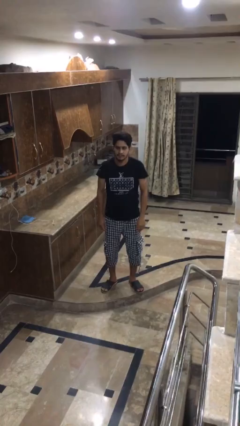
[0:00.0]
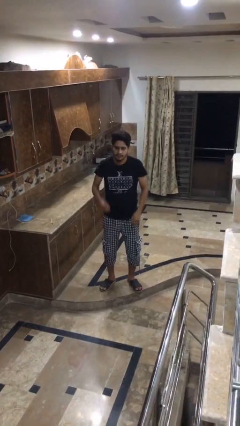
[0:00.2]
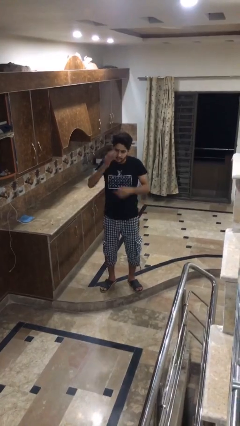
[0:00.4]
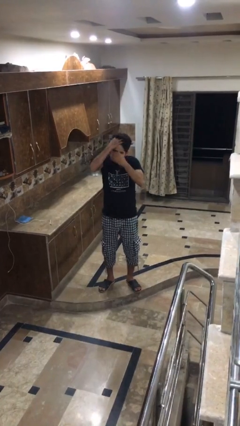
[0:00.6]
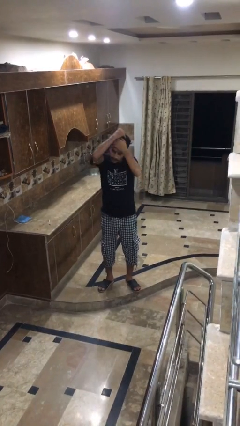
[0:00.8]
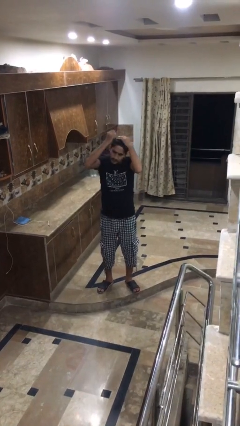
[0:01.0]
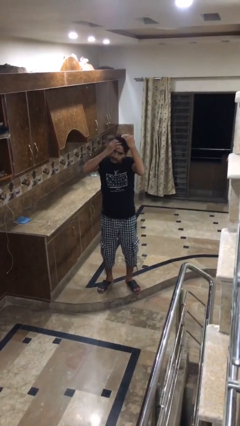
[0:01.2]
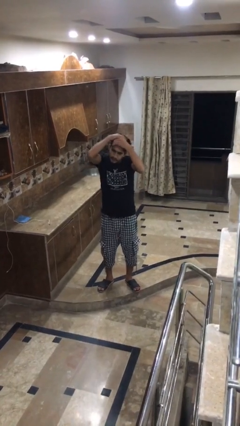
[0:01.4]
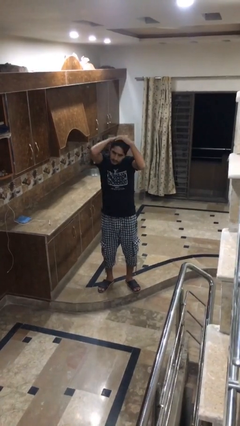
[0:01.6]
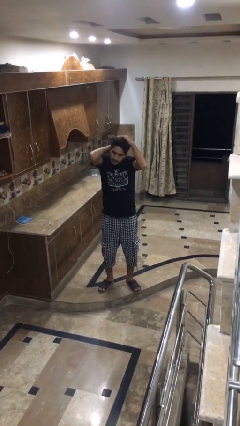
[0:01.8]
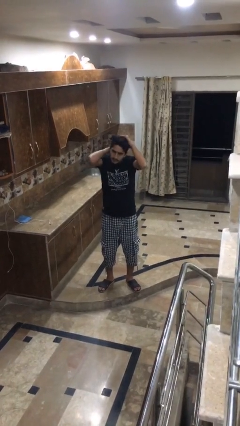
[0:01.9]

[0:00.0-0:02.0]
person strokes hair

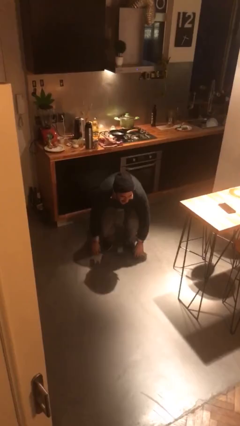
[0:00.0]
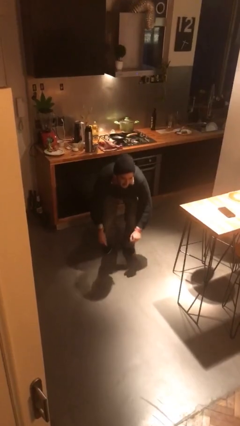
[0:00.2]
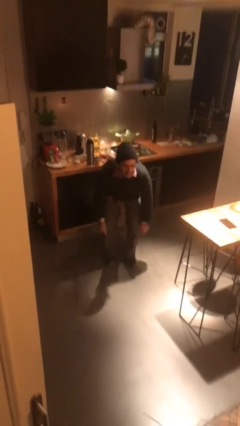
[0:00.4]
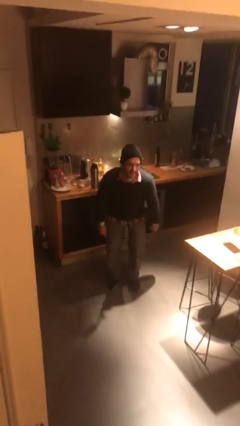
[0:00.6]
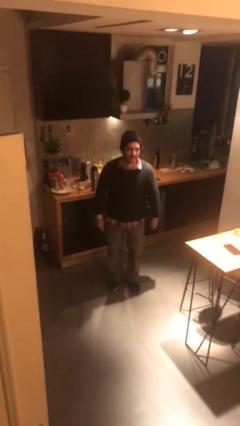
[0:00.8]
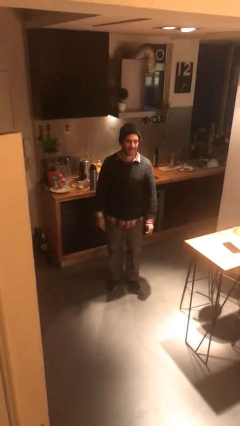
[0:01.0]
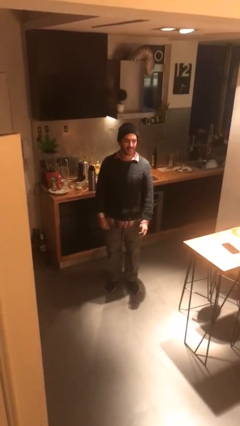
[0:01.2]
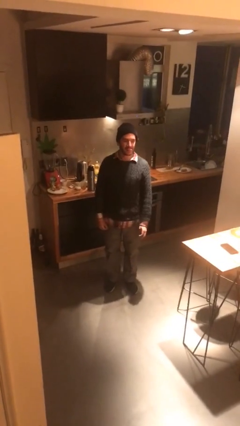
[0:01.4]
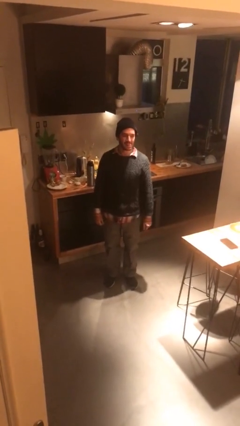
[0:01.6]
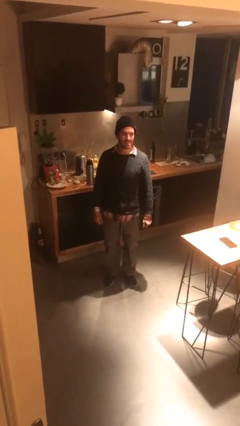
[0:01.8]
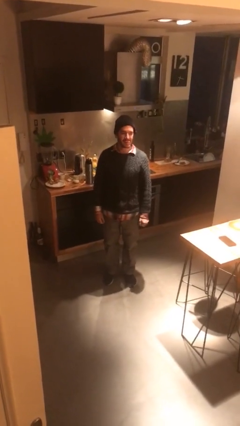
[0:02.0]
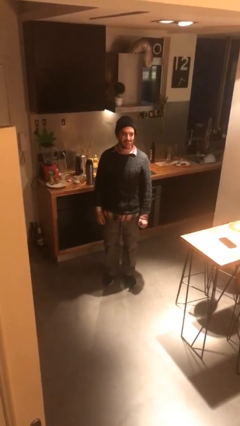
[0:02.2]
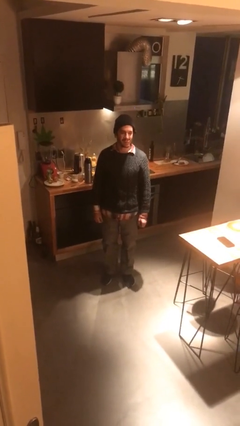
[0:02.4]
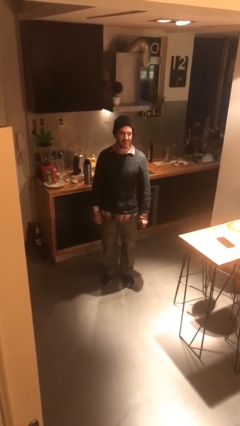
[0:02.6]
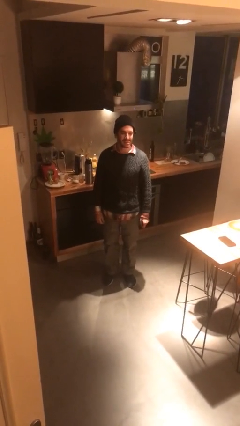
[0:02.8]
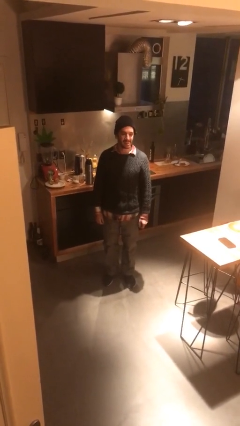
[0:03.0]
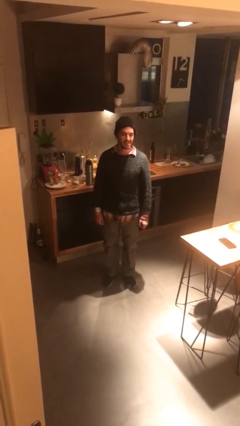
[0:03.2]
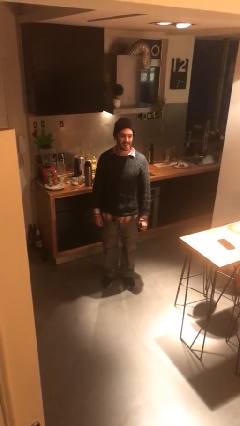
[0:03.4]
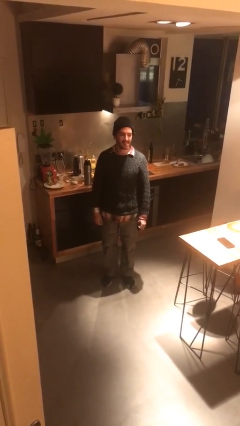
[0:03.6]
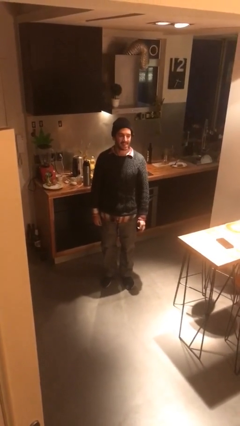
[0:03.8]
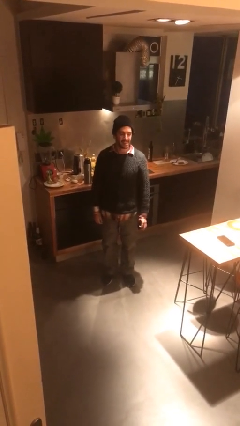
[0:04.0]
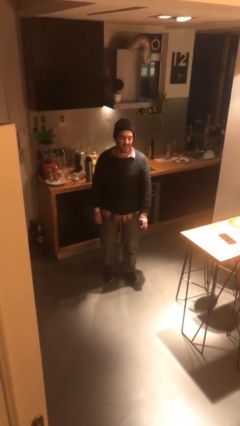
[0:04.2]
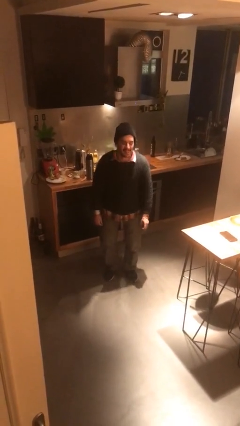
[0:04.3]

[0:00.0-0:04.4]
person stands up

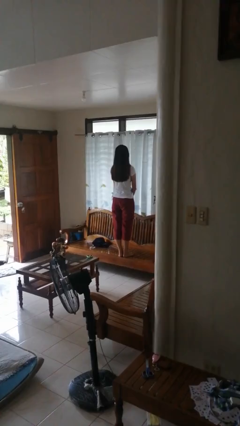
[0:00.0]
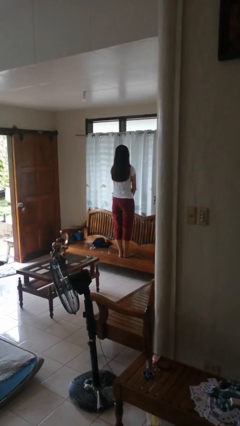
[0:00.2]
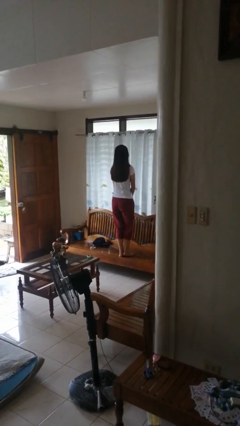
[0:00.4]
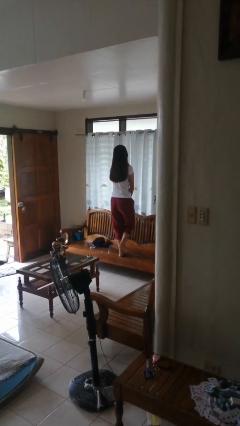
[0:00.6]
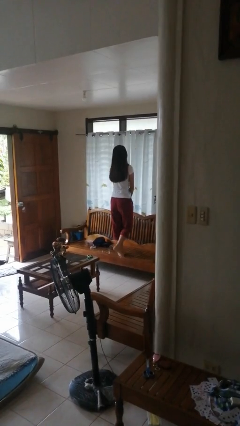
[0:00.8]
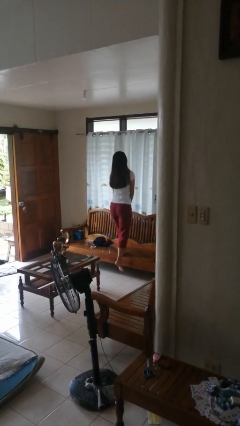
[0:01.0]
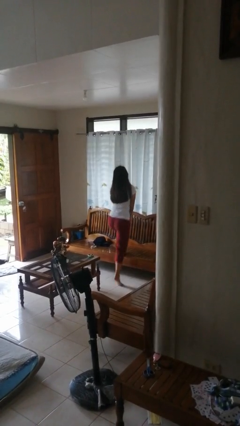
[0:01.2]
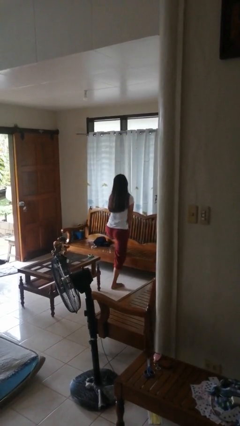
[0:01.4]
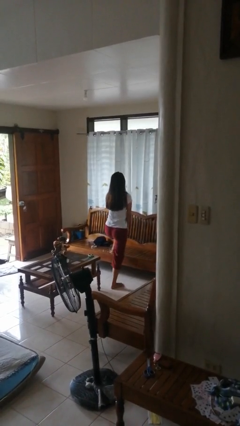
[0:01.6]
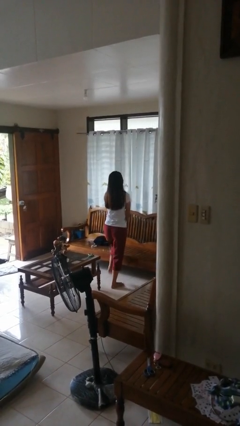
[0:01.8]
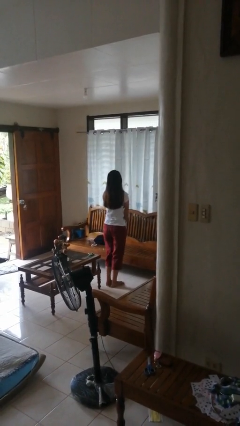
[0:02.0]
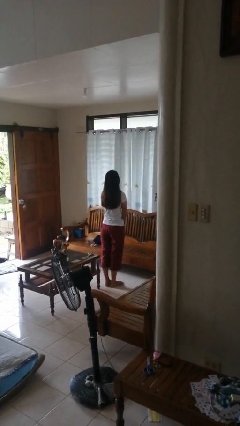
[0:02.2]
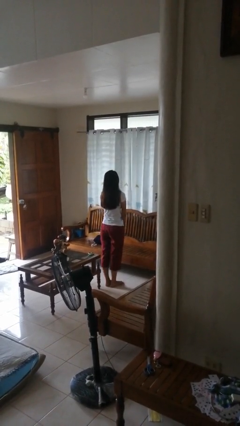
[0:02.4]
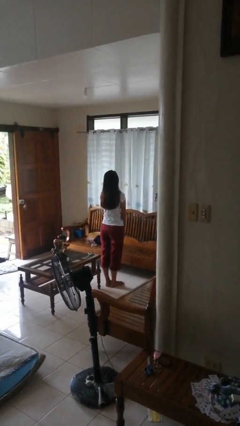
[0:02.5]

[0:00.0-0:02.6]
person climbs off chair

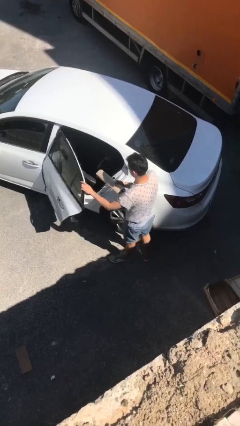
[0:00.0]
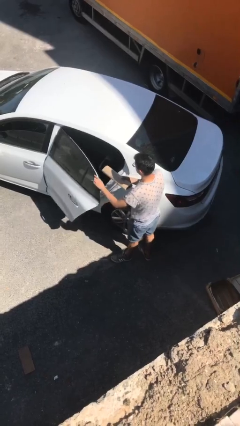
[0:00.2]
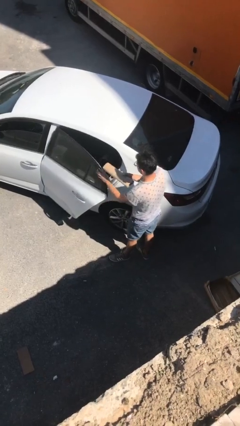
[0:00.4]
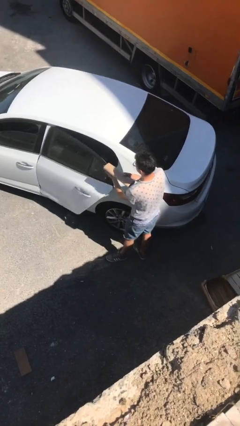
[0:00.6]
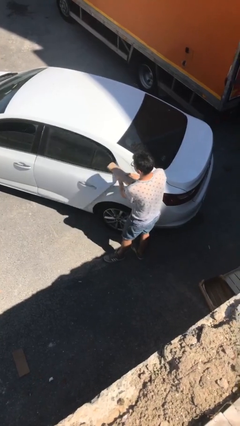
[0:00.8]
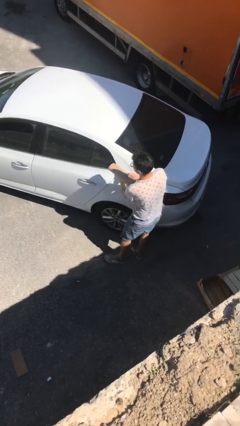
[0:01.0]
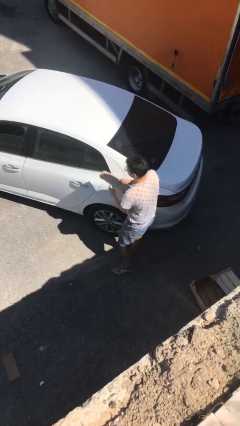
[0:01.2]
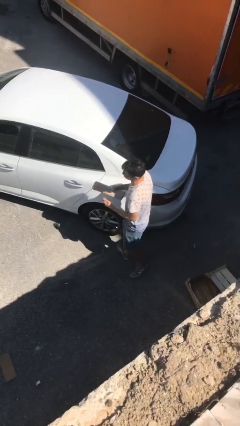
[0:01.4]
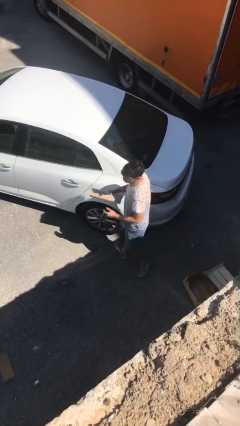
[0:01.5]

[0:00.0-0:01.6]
person closes car door

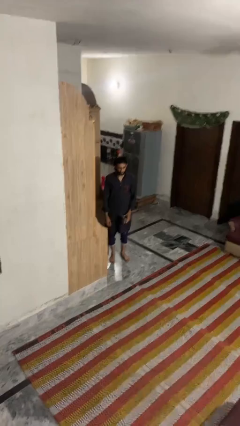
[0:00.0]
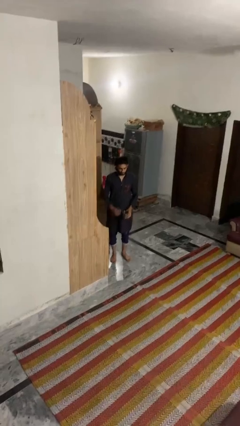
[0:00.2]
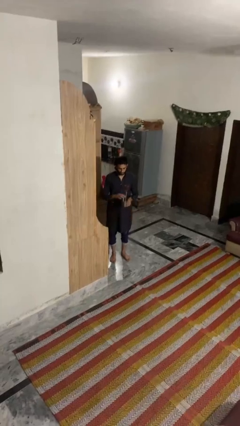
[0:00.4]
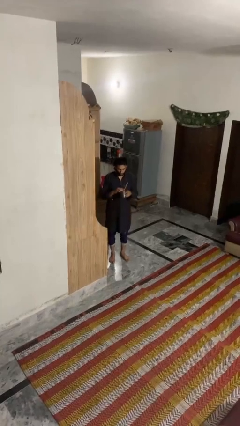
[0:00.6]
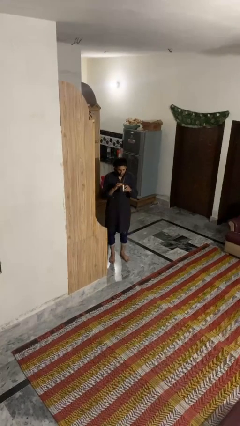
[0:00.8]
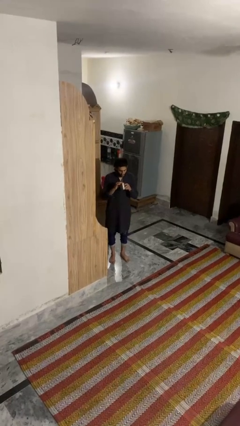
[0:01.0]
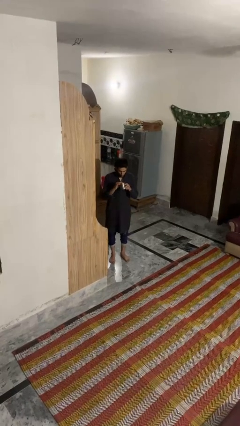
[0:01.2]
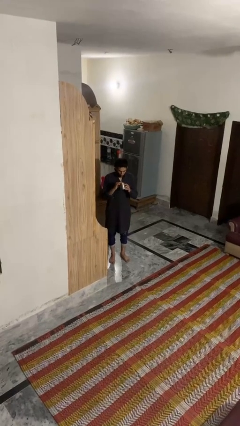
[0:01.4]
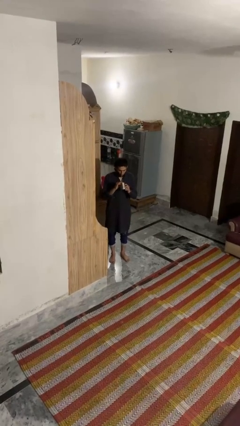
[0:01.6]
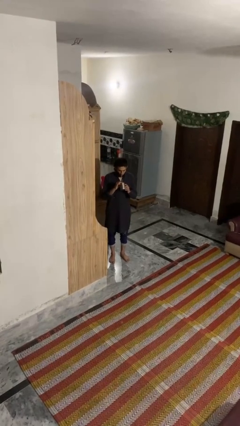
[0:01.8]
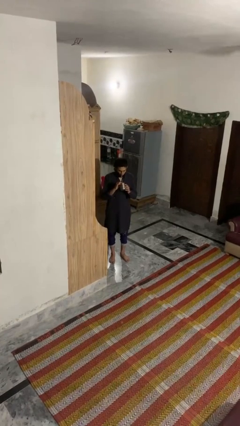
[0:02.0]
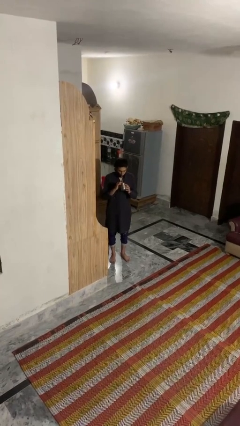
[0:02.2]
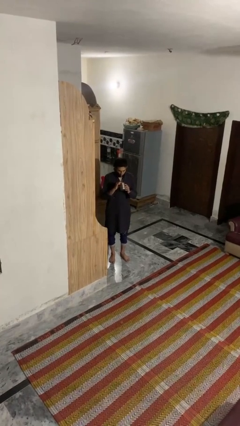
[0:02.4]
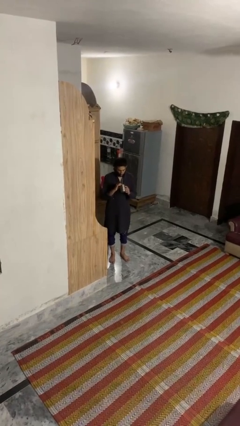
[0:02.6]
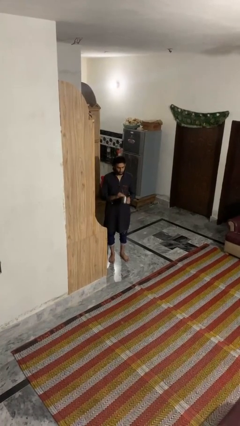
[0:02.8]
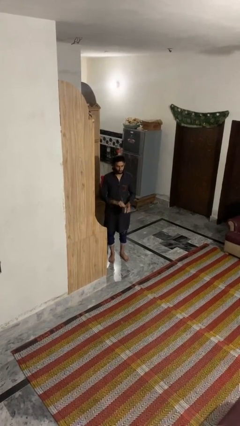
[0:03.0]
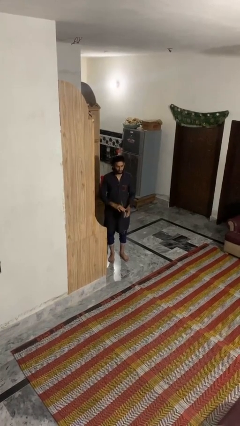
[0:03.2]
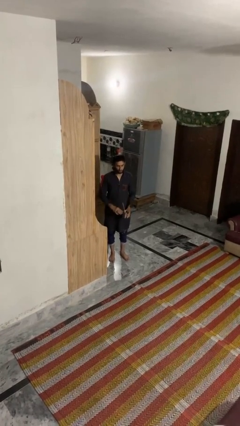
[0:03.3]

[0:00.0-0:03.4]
person drinks from straw

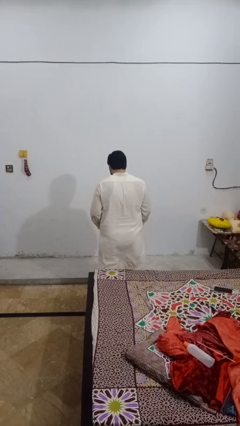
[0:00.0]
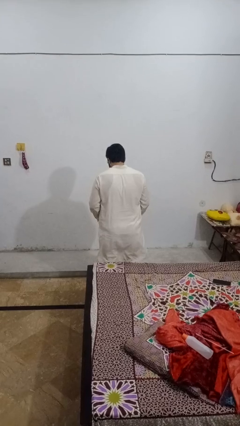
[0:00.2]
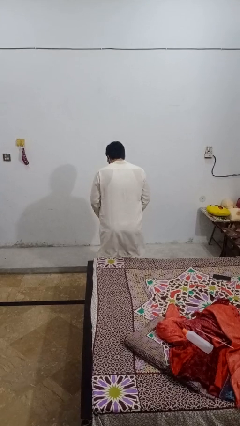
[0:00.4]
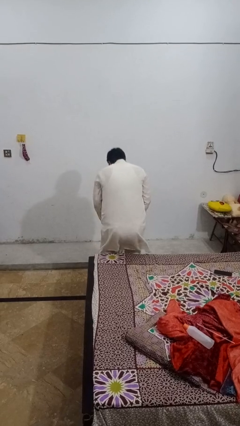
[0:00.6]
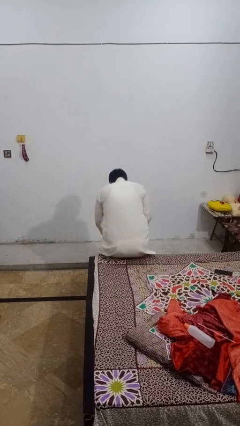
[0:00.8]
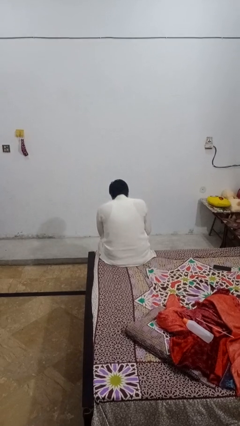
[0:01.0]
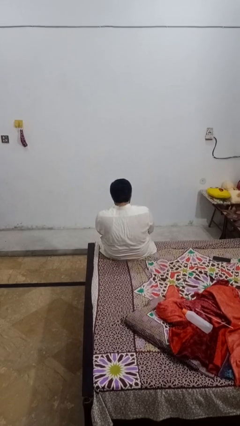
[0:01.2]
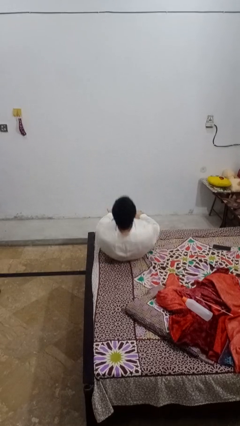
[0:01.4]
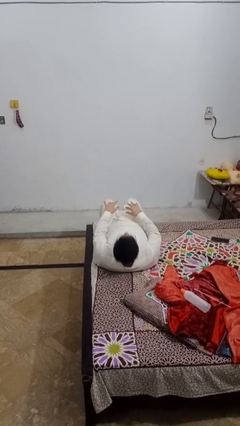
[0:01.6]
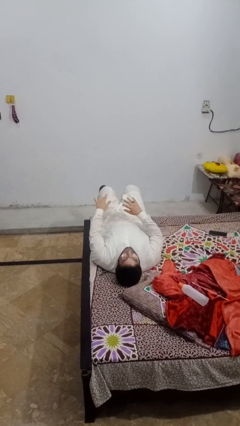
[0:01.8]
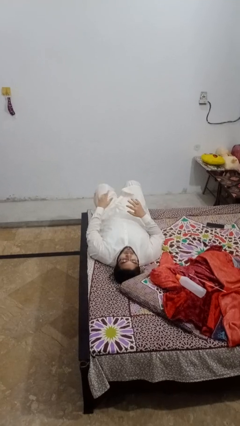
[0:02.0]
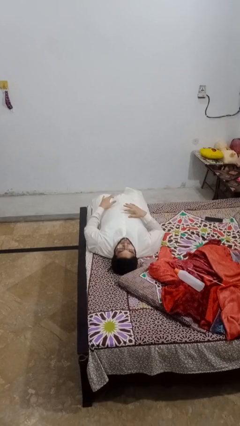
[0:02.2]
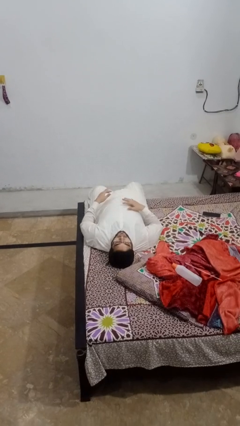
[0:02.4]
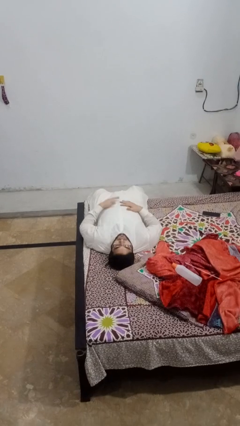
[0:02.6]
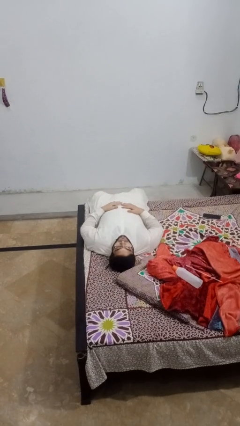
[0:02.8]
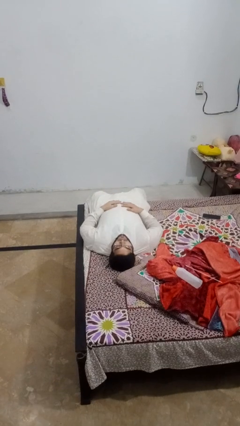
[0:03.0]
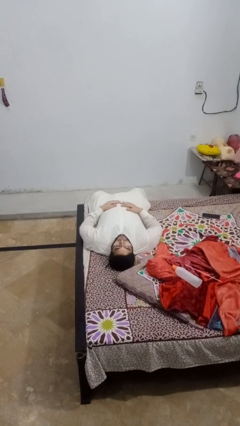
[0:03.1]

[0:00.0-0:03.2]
person lies down on bed
